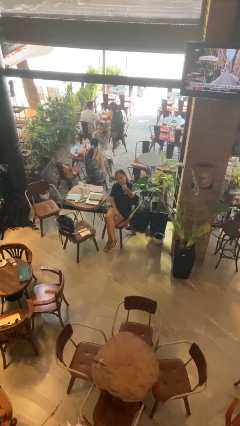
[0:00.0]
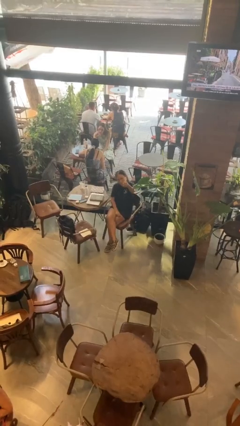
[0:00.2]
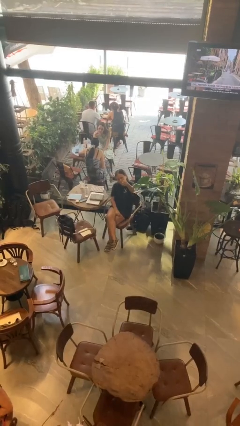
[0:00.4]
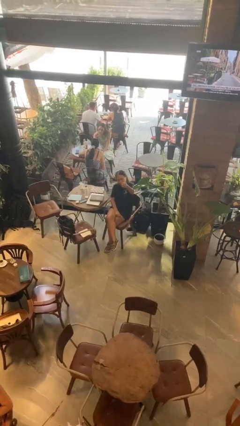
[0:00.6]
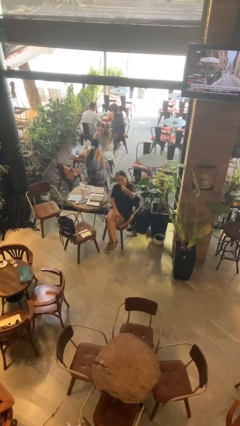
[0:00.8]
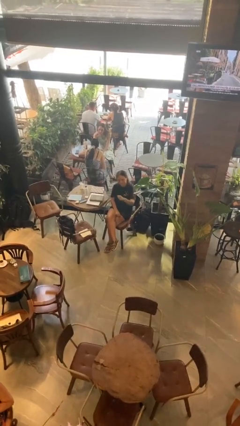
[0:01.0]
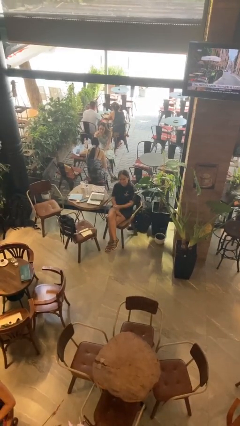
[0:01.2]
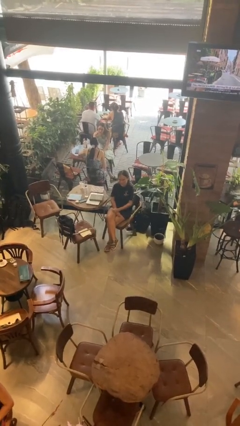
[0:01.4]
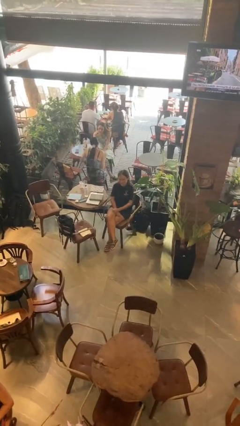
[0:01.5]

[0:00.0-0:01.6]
person gestures thumbs up

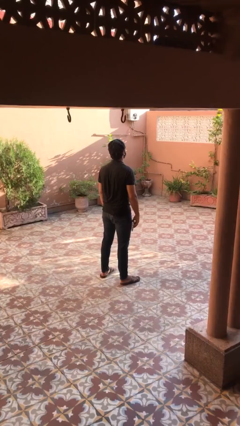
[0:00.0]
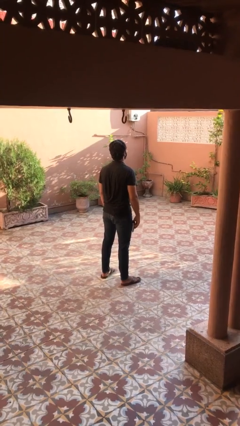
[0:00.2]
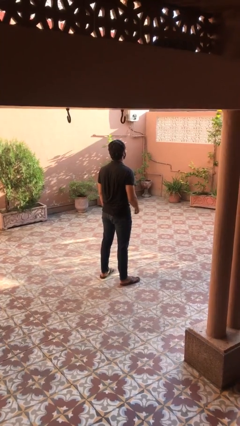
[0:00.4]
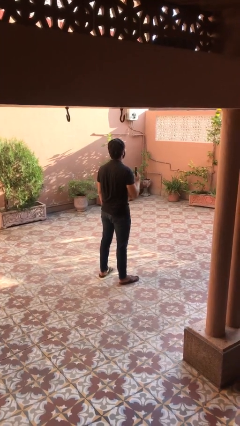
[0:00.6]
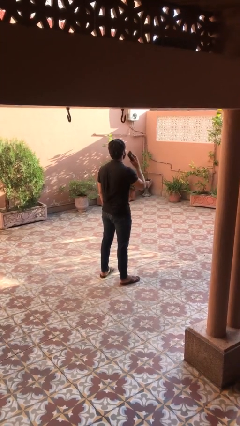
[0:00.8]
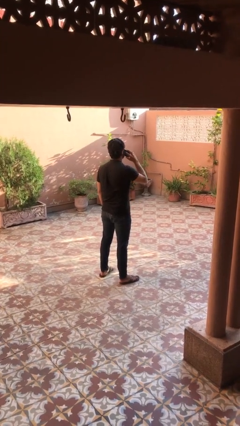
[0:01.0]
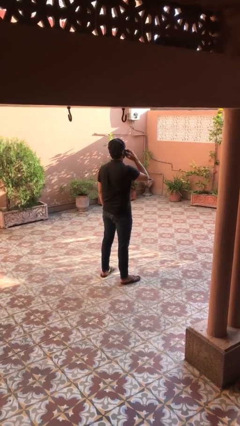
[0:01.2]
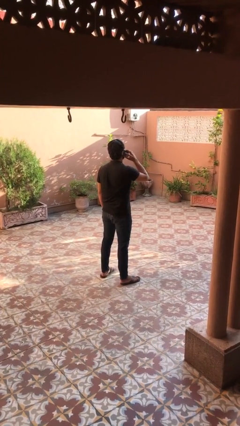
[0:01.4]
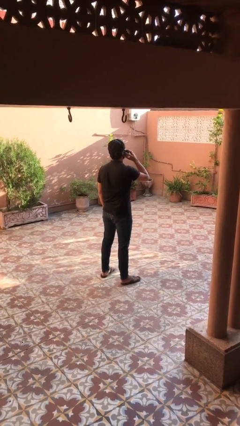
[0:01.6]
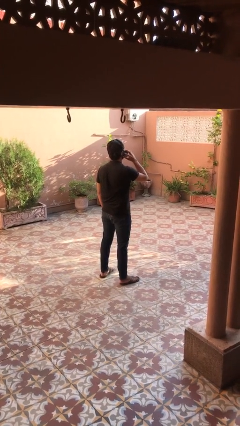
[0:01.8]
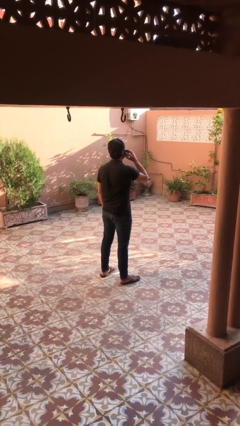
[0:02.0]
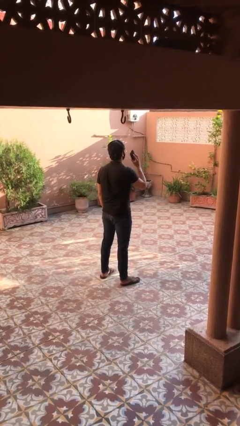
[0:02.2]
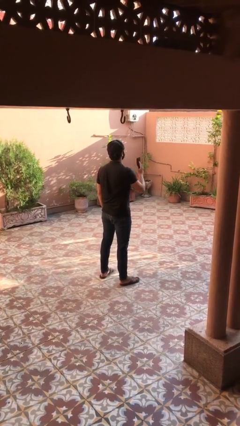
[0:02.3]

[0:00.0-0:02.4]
person gestures call me

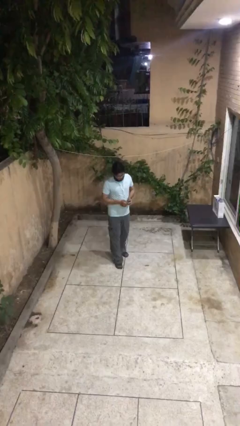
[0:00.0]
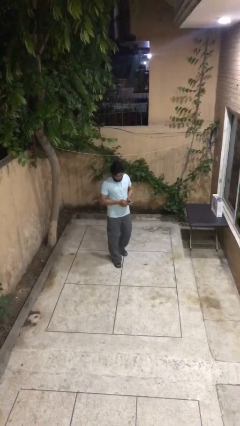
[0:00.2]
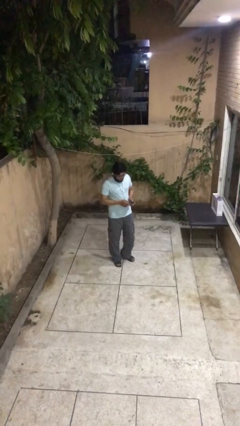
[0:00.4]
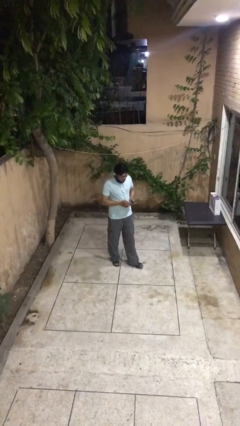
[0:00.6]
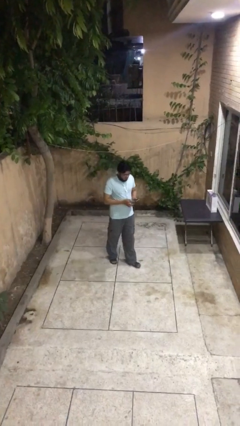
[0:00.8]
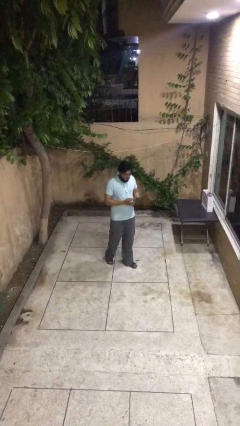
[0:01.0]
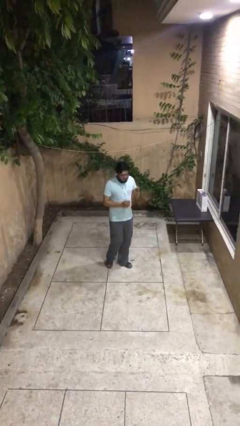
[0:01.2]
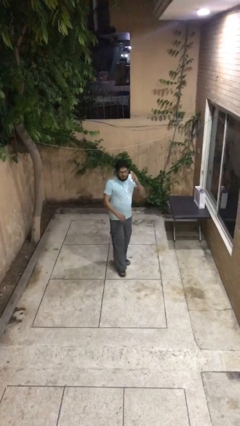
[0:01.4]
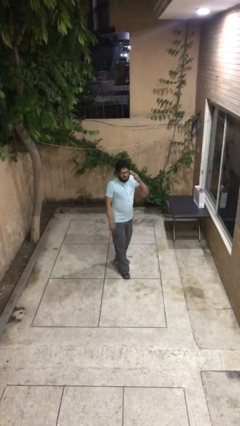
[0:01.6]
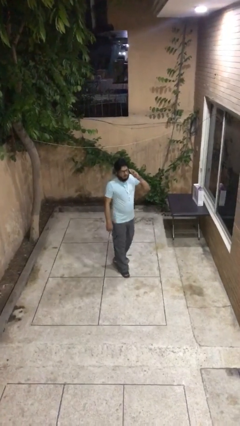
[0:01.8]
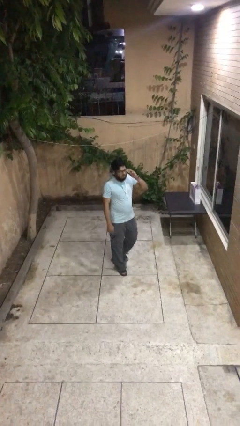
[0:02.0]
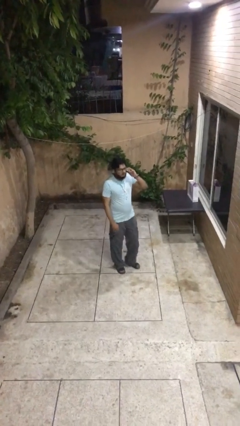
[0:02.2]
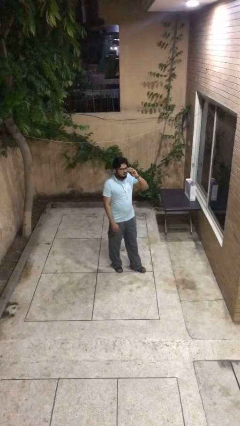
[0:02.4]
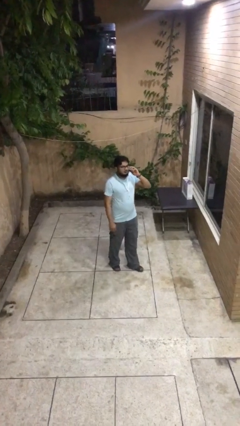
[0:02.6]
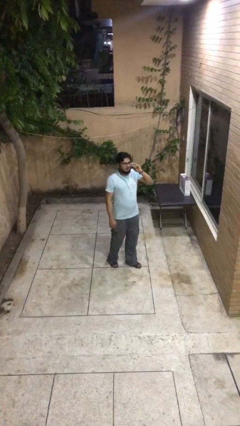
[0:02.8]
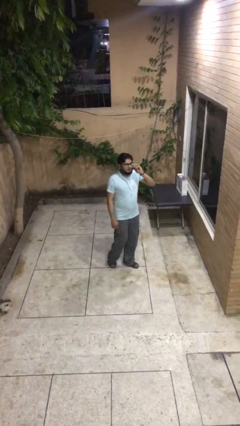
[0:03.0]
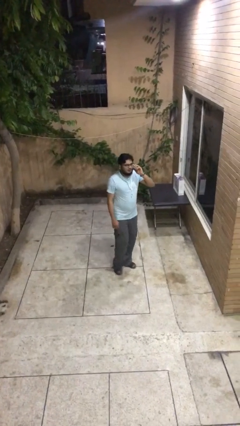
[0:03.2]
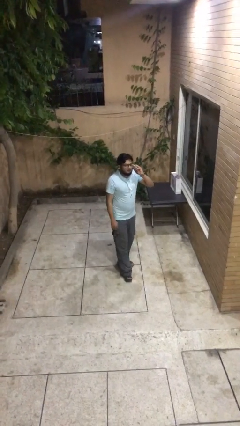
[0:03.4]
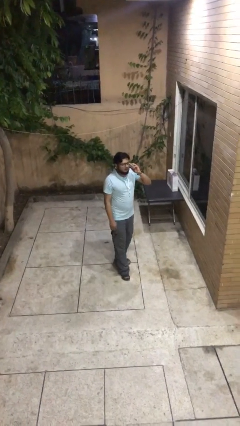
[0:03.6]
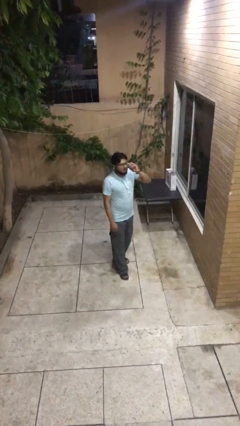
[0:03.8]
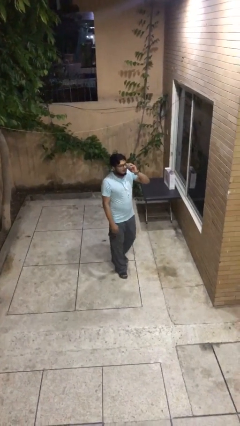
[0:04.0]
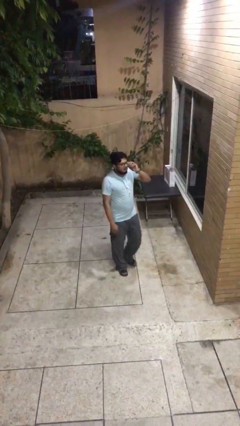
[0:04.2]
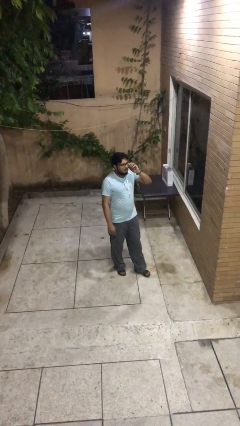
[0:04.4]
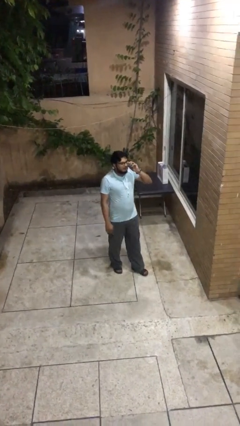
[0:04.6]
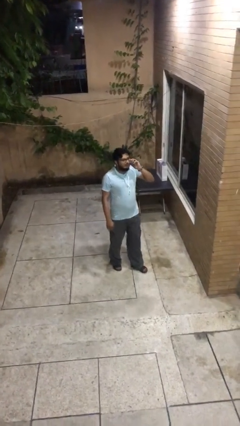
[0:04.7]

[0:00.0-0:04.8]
person talks on phone

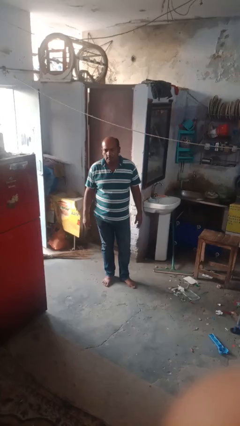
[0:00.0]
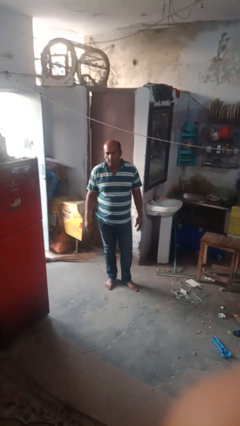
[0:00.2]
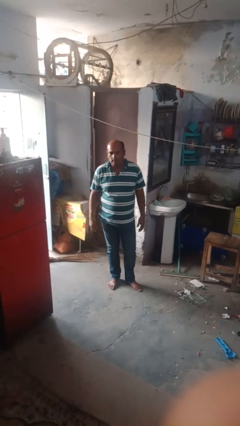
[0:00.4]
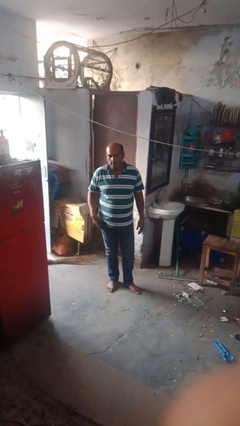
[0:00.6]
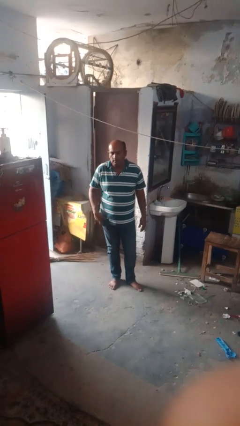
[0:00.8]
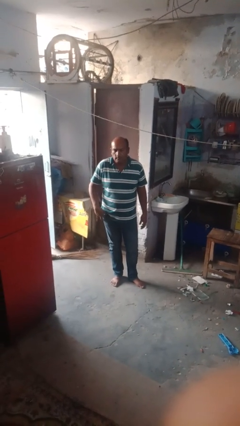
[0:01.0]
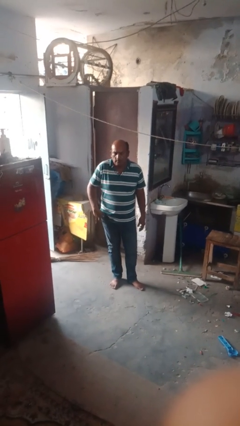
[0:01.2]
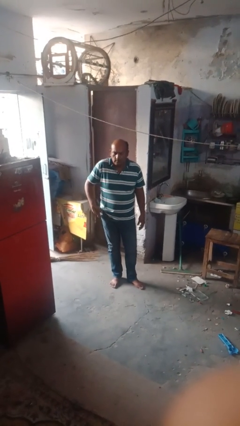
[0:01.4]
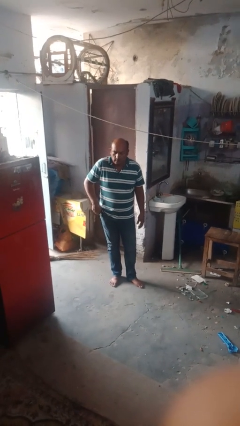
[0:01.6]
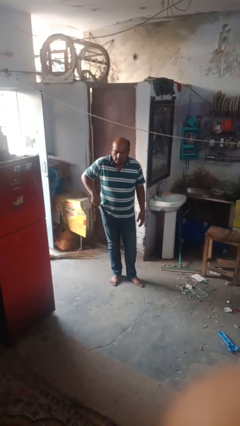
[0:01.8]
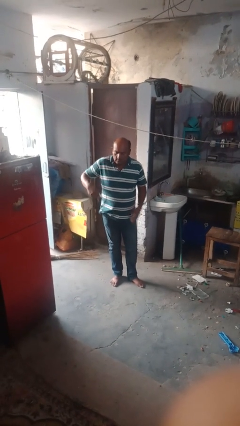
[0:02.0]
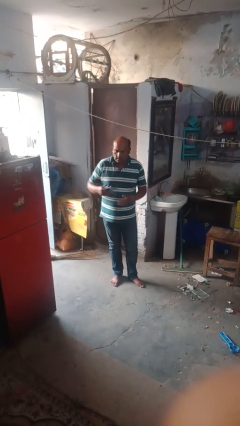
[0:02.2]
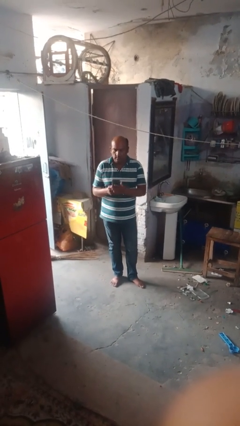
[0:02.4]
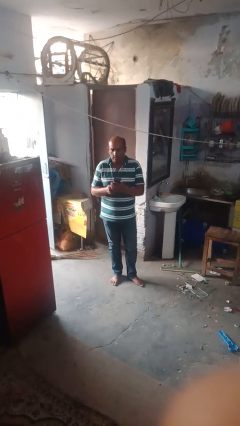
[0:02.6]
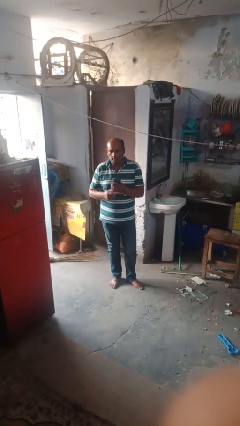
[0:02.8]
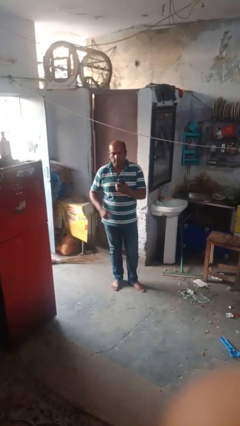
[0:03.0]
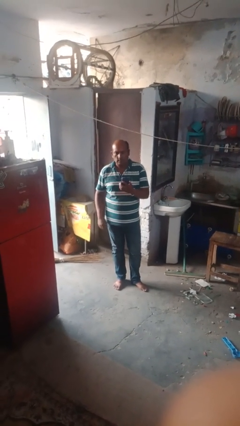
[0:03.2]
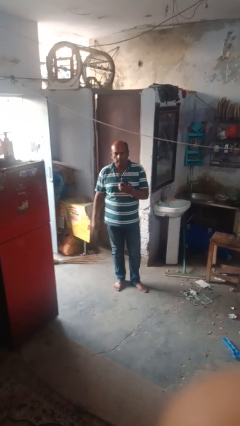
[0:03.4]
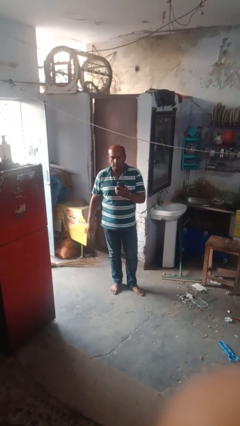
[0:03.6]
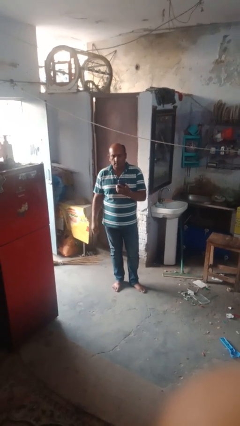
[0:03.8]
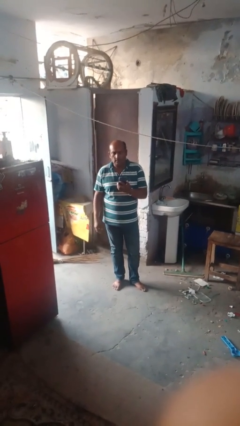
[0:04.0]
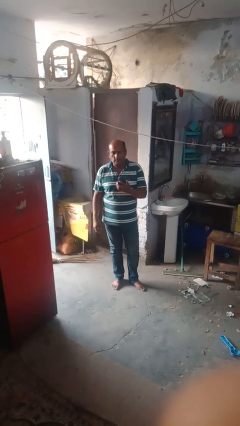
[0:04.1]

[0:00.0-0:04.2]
person takes phone from pocket

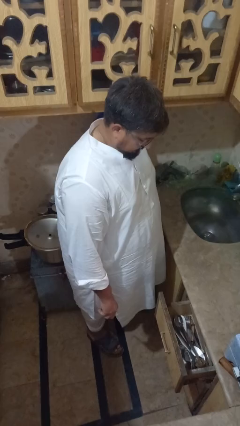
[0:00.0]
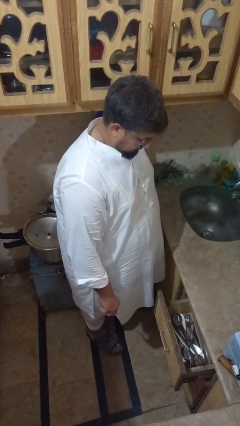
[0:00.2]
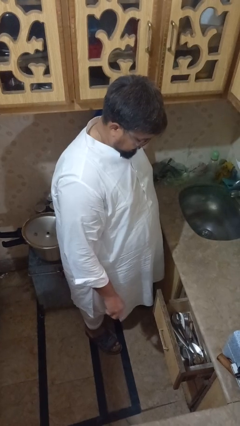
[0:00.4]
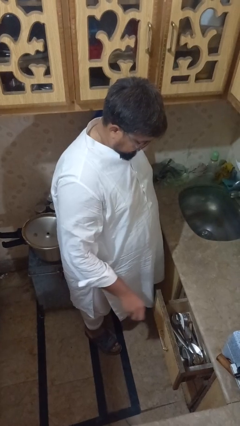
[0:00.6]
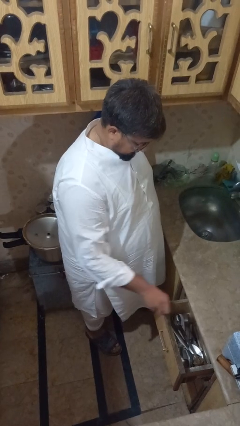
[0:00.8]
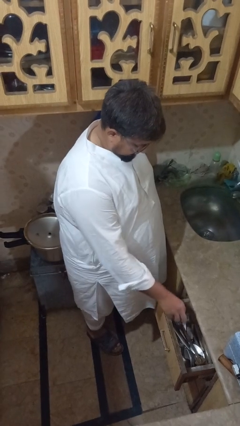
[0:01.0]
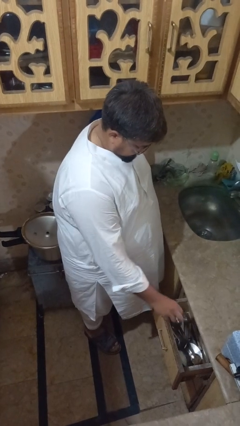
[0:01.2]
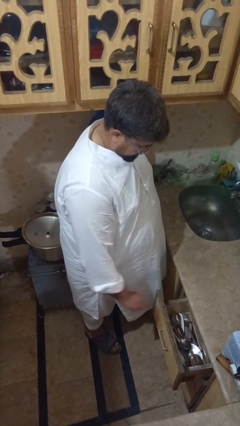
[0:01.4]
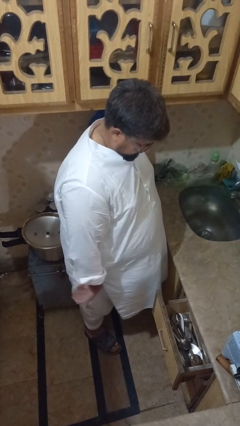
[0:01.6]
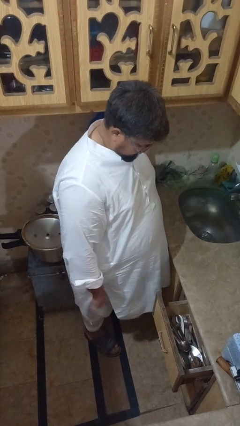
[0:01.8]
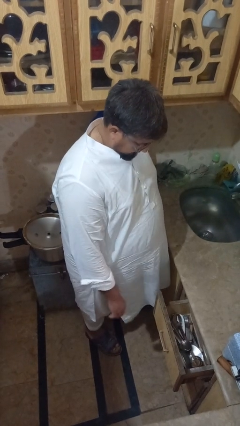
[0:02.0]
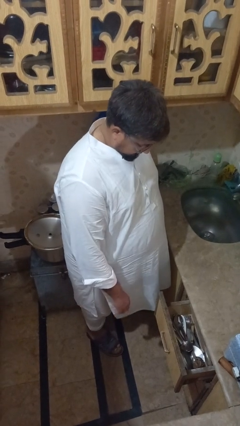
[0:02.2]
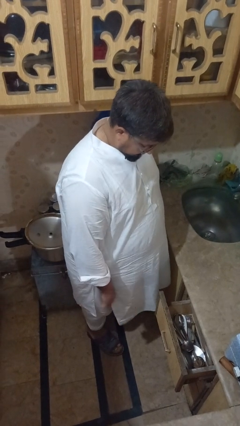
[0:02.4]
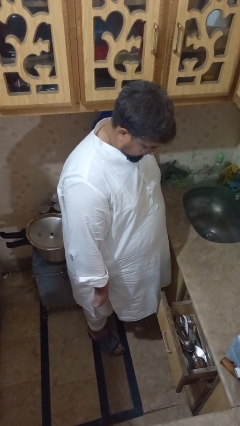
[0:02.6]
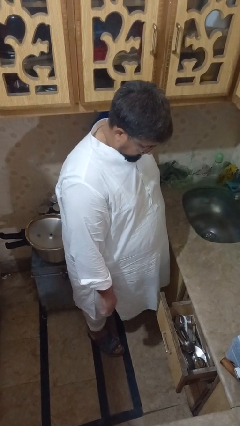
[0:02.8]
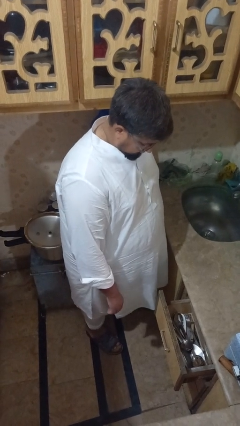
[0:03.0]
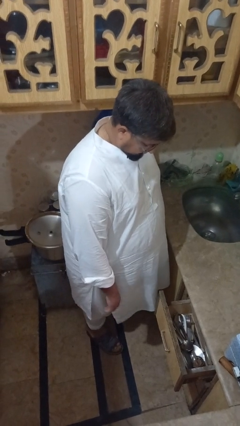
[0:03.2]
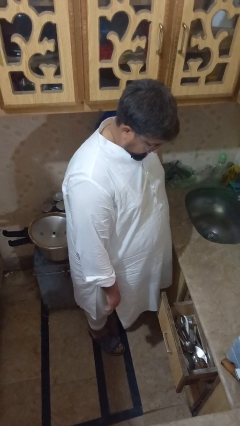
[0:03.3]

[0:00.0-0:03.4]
person puts object into kitchen drawer

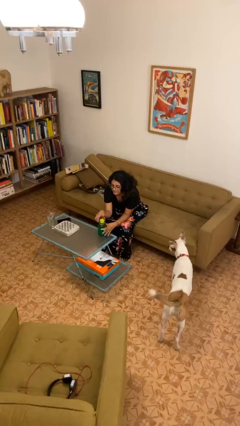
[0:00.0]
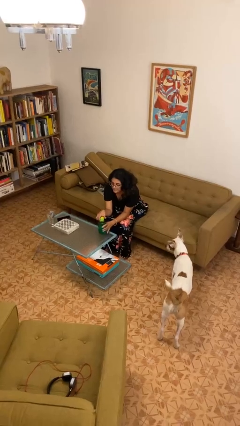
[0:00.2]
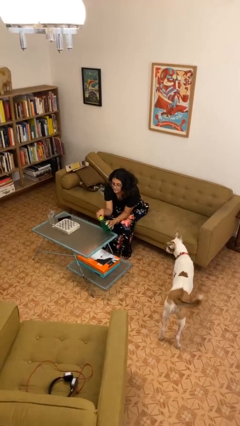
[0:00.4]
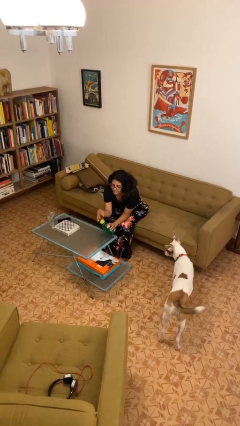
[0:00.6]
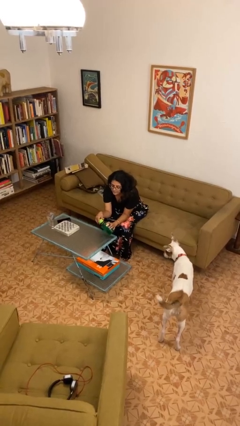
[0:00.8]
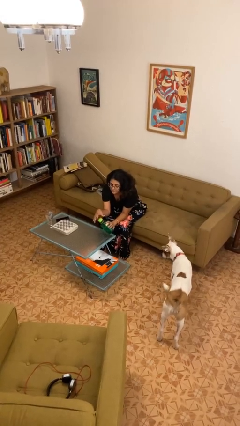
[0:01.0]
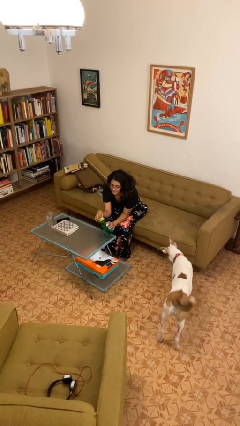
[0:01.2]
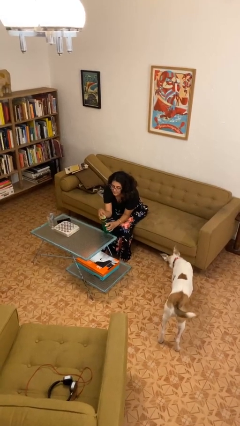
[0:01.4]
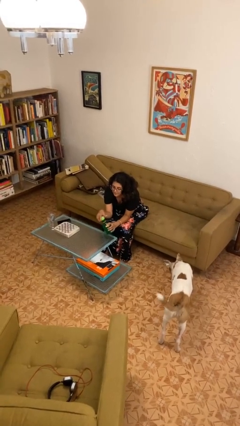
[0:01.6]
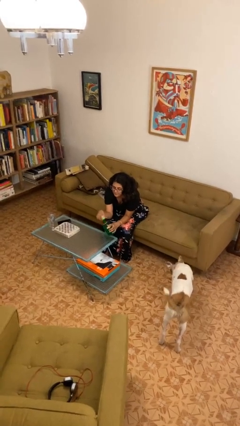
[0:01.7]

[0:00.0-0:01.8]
person unscrews lid from bottle
